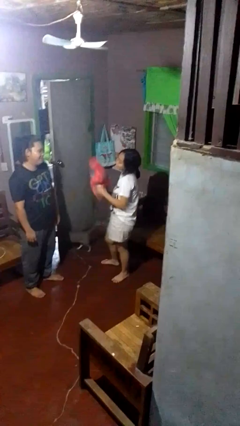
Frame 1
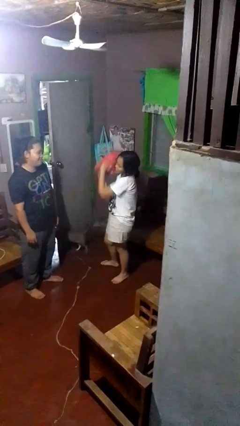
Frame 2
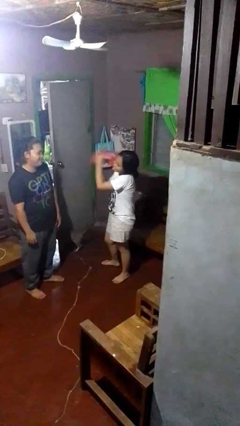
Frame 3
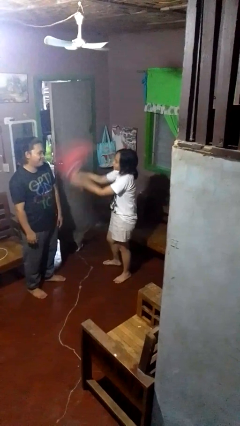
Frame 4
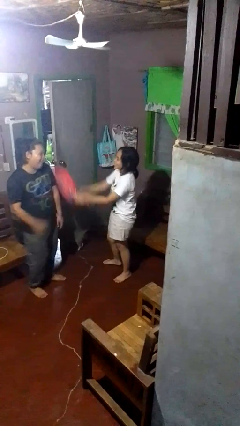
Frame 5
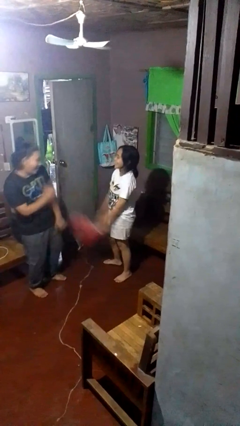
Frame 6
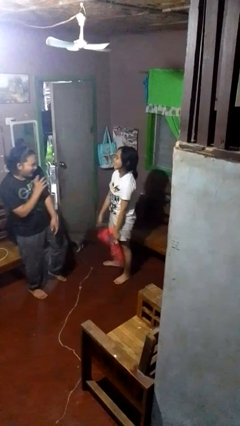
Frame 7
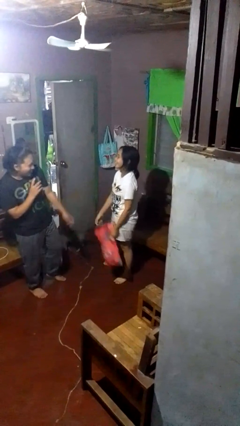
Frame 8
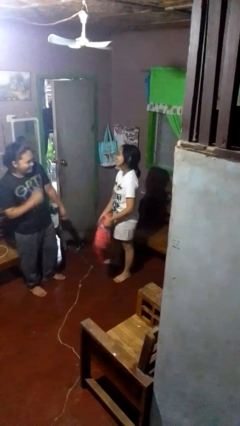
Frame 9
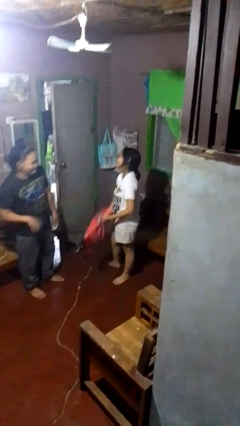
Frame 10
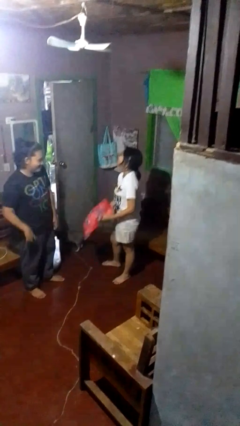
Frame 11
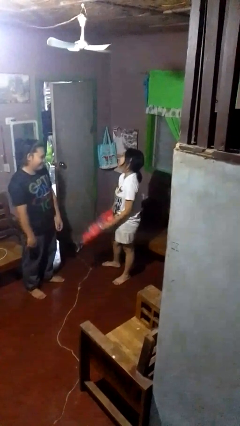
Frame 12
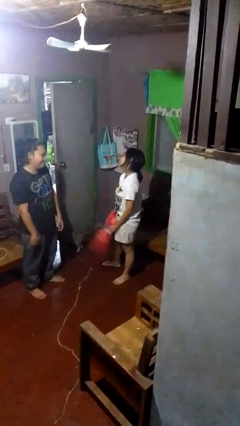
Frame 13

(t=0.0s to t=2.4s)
person hits person with pillow

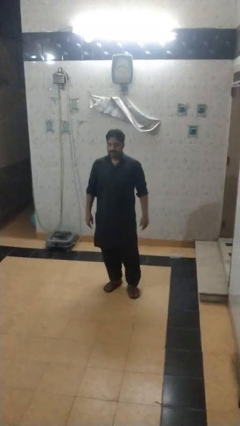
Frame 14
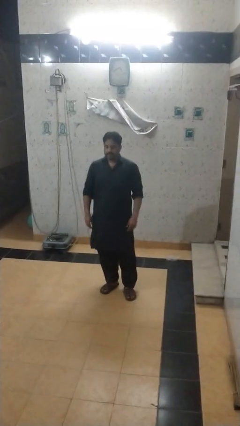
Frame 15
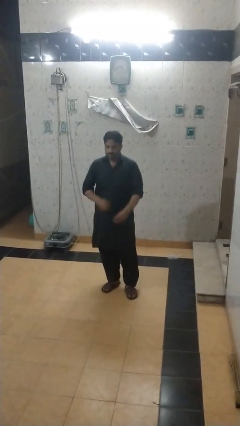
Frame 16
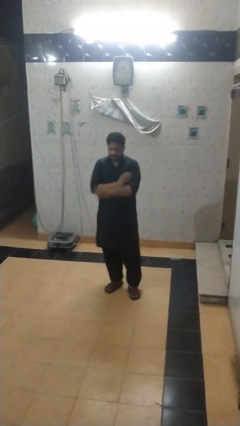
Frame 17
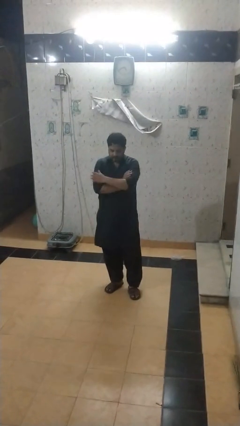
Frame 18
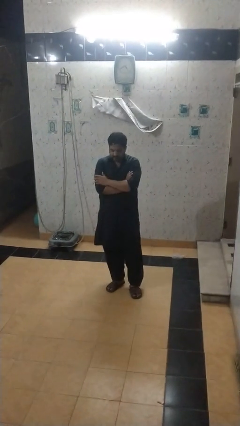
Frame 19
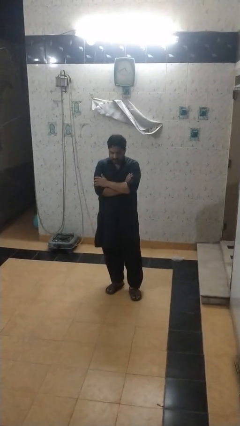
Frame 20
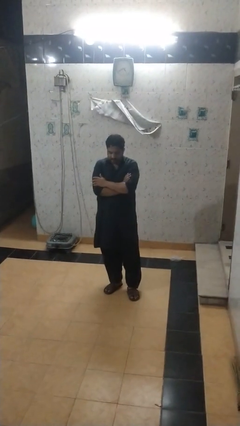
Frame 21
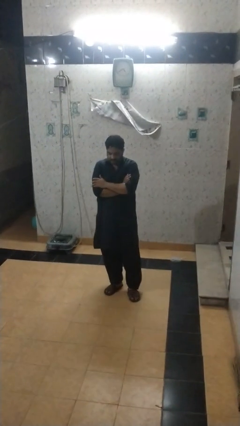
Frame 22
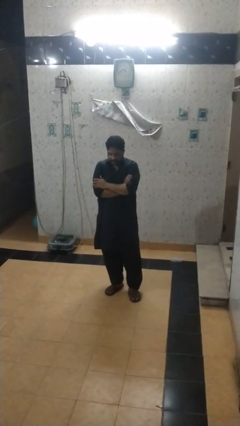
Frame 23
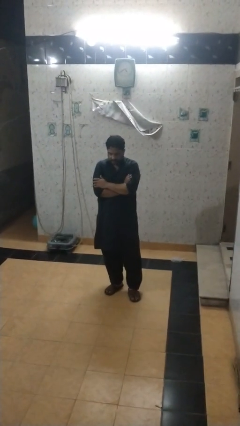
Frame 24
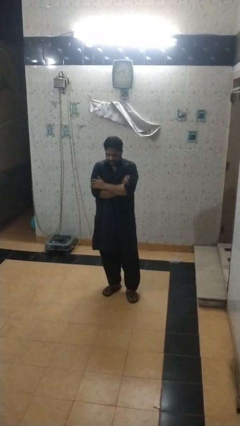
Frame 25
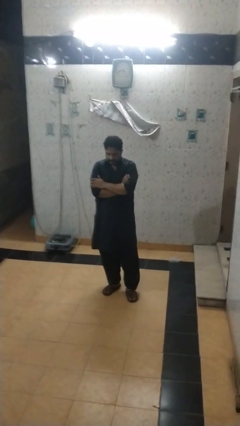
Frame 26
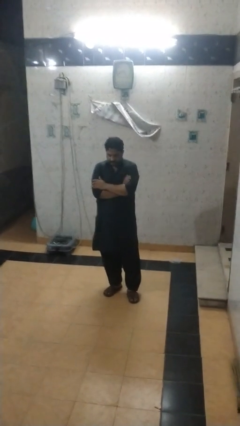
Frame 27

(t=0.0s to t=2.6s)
person crosses arms

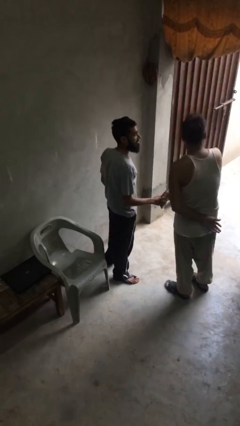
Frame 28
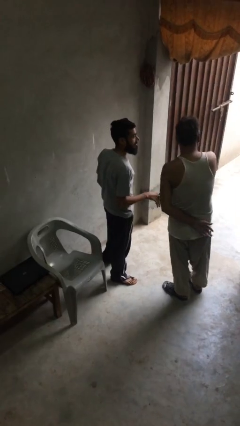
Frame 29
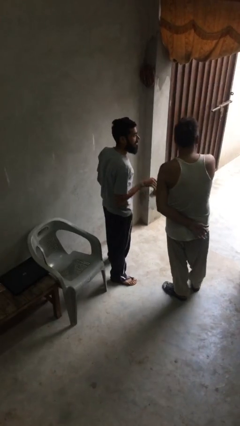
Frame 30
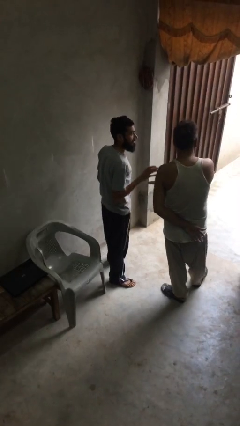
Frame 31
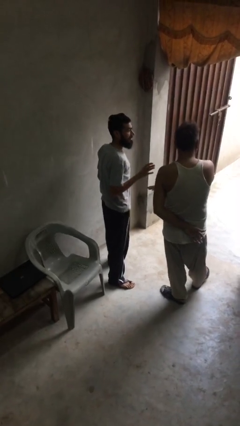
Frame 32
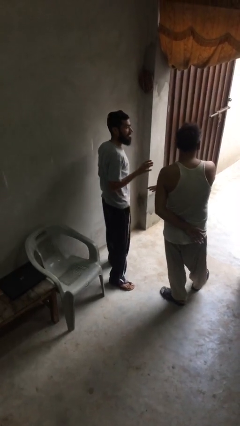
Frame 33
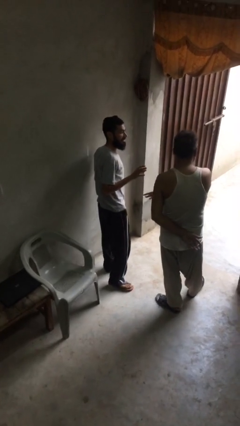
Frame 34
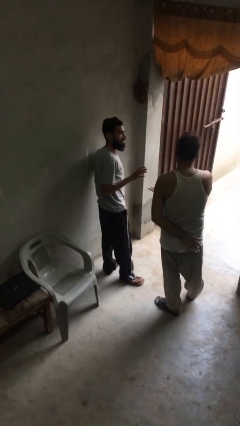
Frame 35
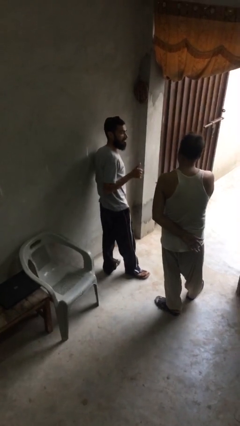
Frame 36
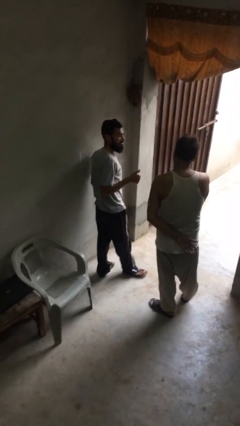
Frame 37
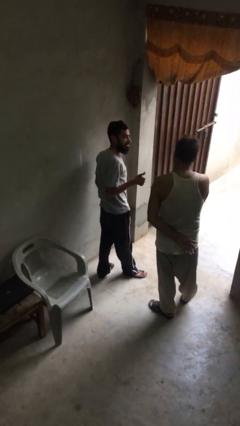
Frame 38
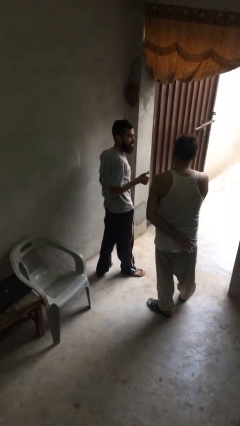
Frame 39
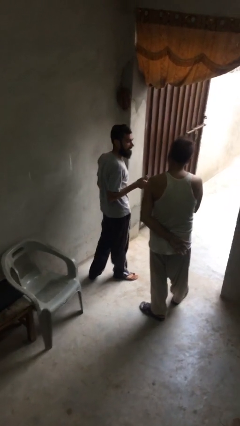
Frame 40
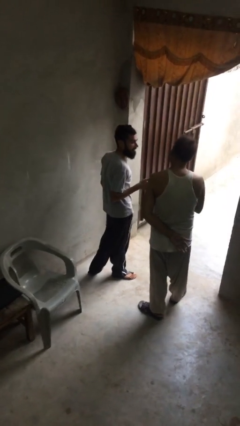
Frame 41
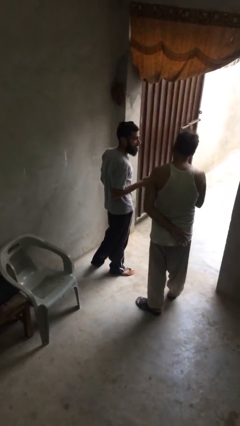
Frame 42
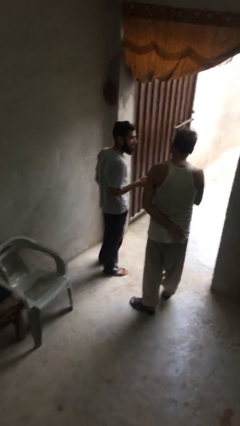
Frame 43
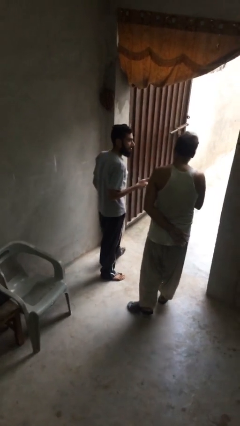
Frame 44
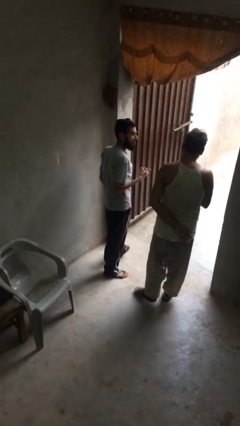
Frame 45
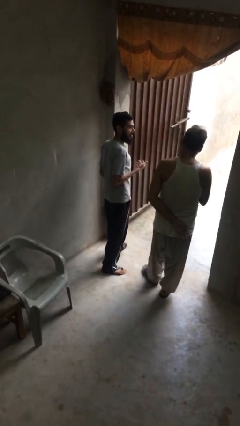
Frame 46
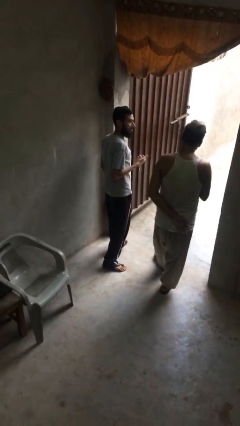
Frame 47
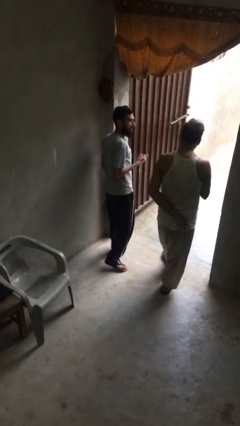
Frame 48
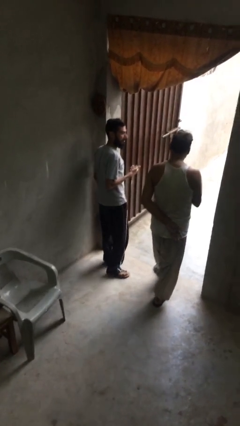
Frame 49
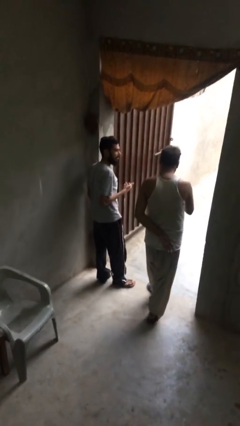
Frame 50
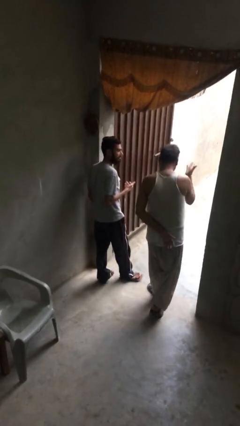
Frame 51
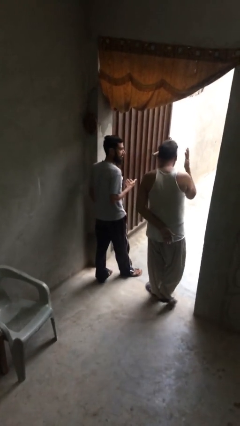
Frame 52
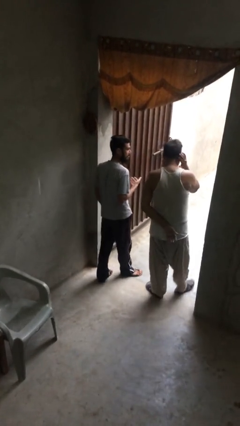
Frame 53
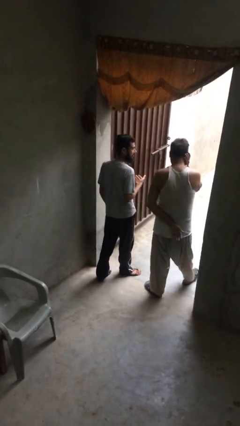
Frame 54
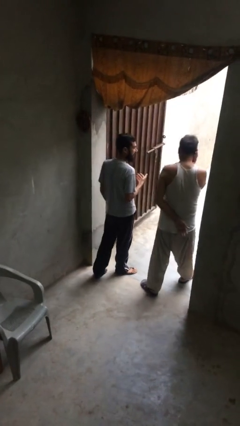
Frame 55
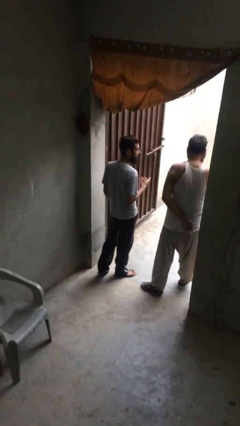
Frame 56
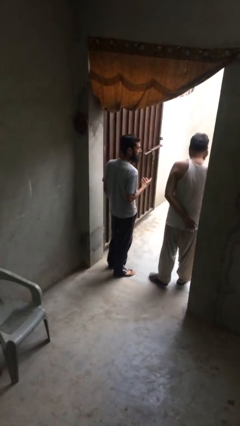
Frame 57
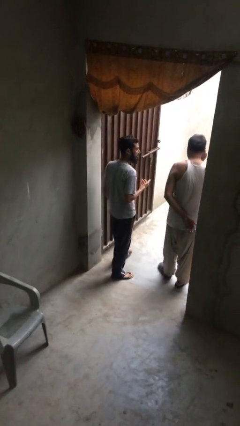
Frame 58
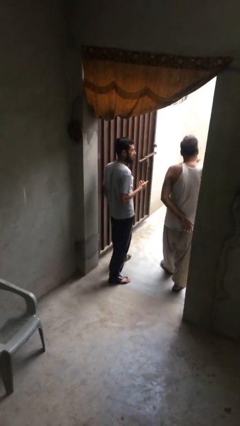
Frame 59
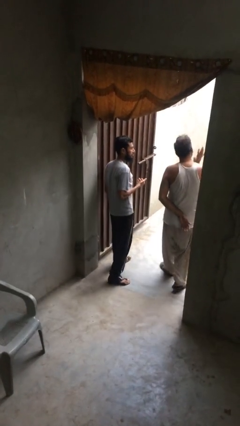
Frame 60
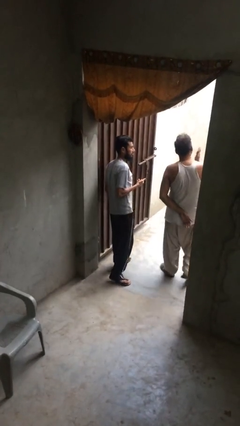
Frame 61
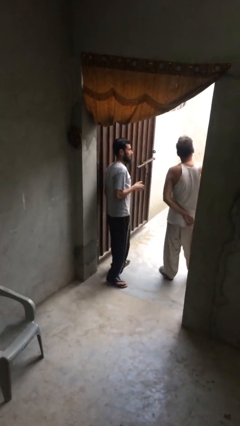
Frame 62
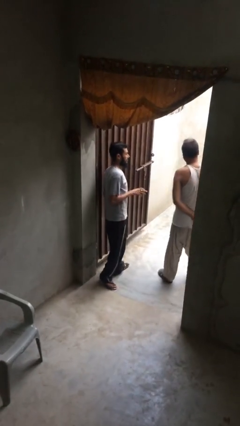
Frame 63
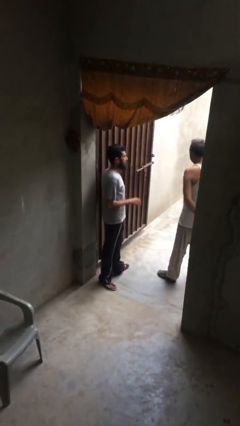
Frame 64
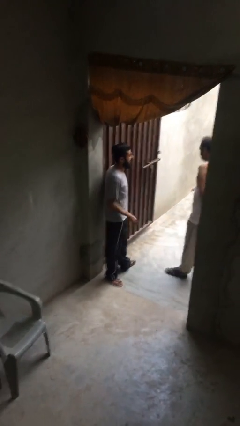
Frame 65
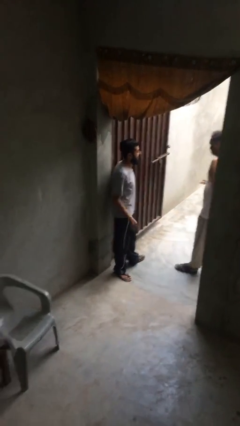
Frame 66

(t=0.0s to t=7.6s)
person talks to person

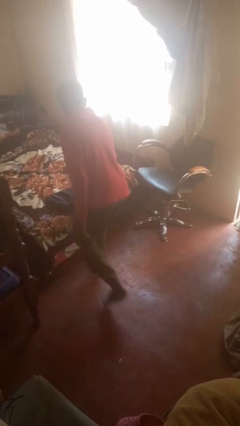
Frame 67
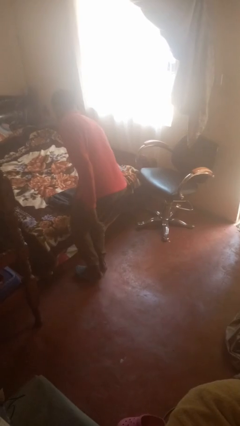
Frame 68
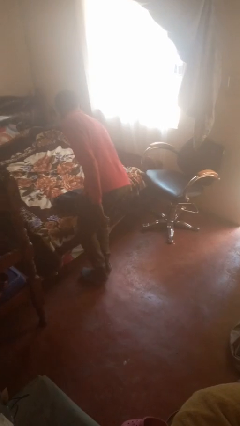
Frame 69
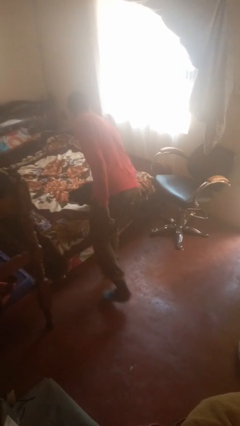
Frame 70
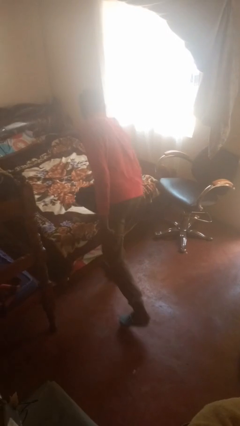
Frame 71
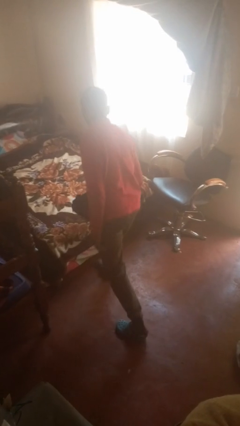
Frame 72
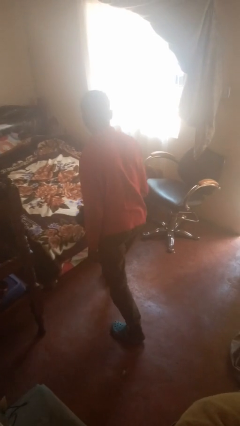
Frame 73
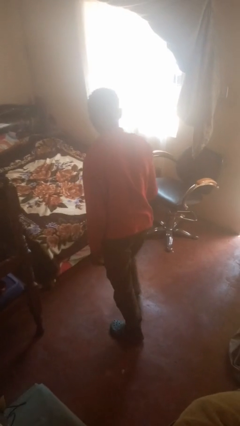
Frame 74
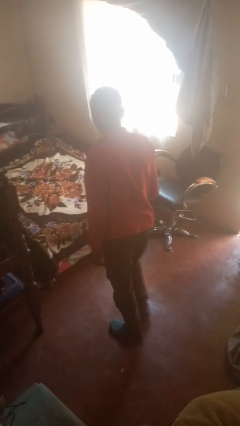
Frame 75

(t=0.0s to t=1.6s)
person picks up object from bed

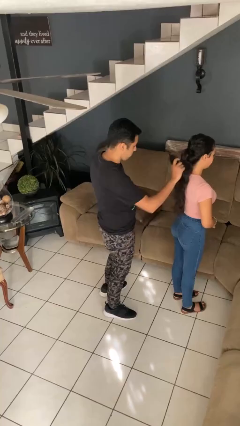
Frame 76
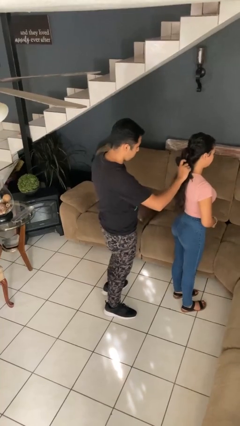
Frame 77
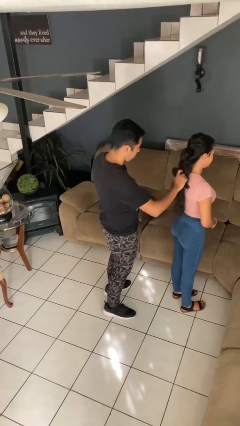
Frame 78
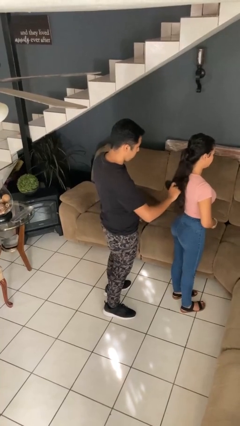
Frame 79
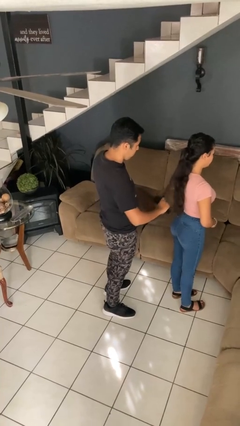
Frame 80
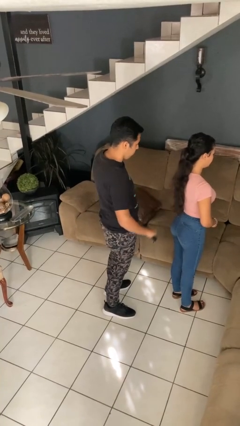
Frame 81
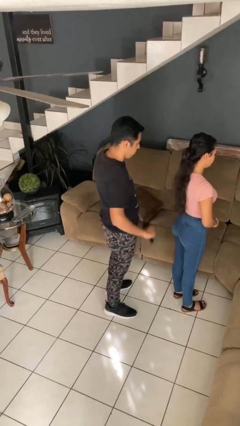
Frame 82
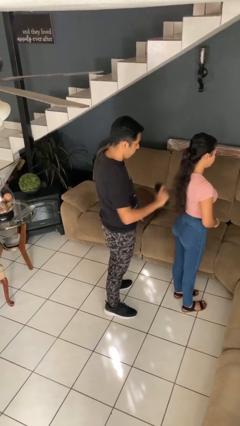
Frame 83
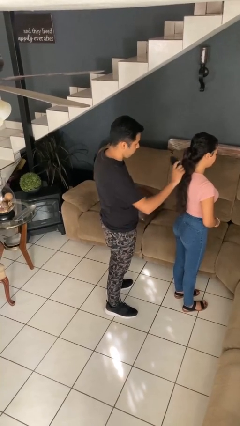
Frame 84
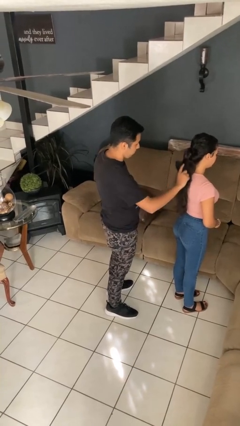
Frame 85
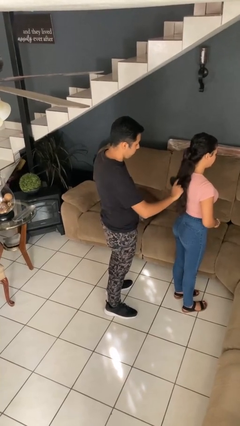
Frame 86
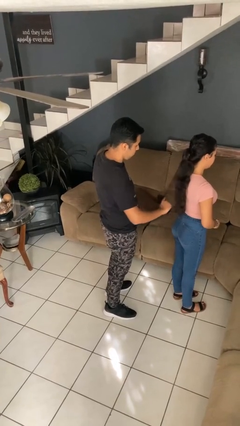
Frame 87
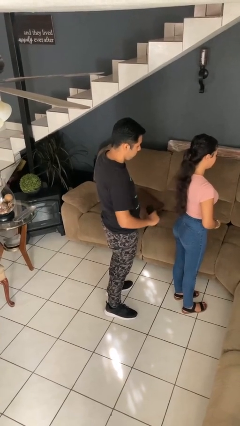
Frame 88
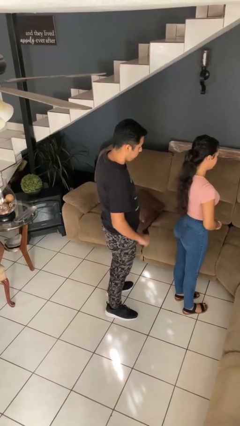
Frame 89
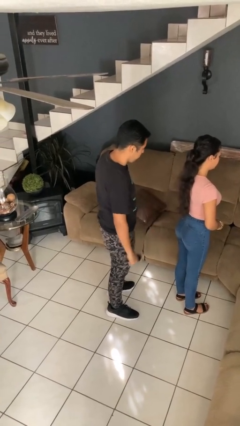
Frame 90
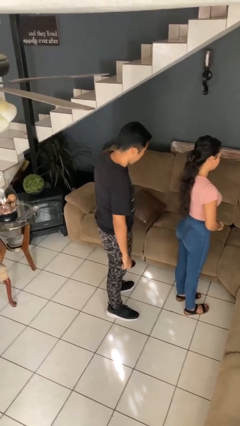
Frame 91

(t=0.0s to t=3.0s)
person brushes hair of person

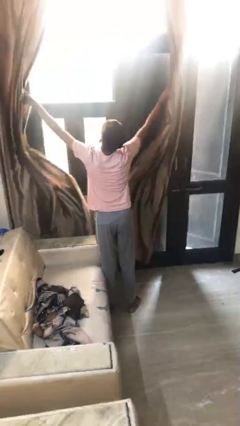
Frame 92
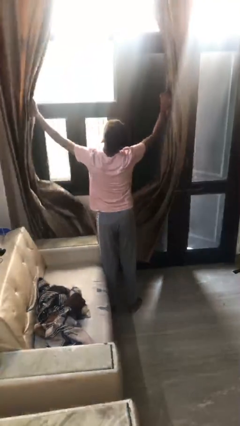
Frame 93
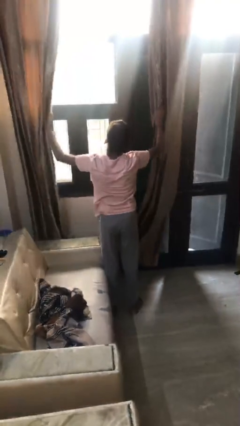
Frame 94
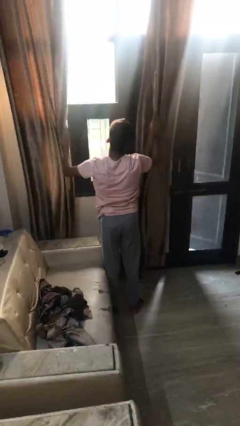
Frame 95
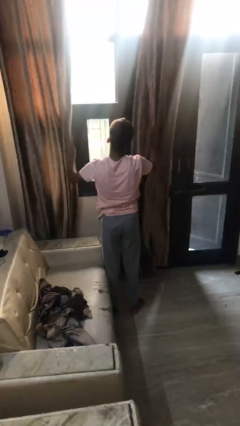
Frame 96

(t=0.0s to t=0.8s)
person opens curtains
